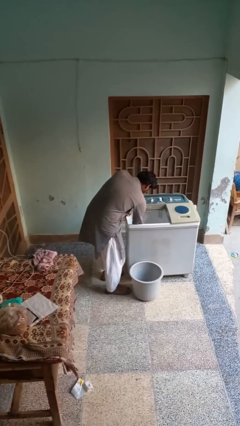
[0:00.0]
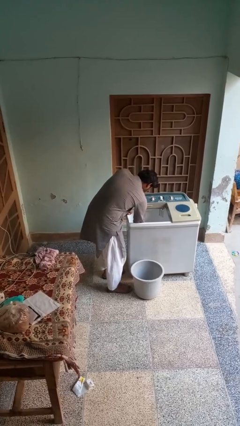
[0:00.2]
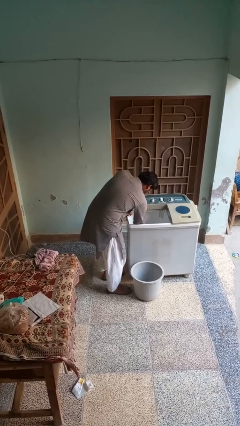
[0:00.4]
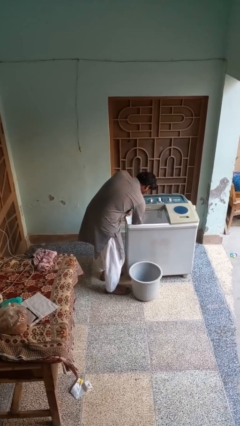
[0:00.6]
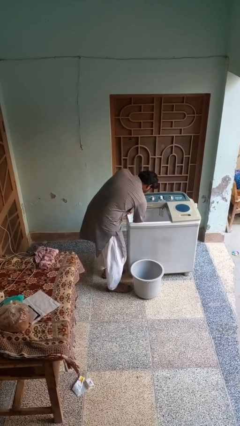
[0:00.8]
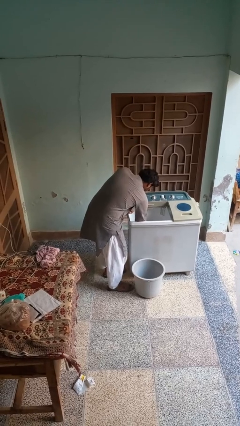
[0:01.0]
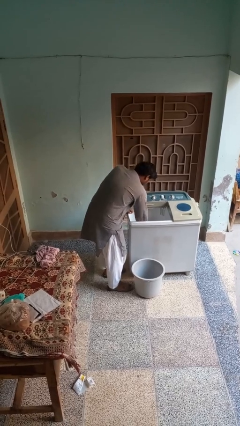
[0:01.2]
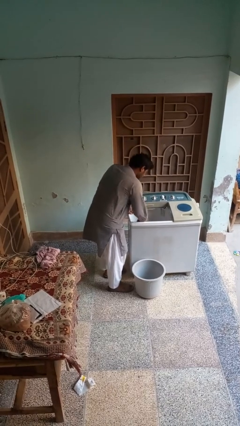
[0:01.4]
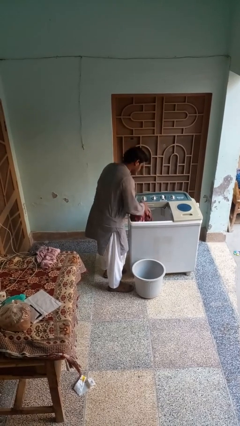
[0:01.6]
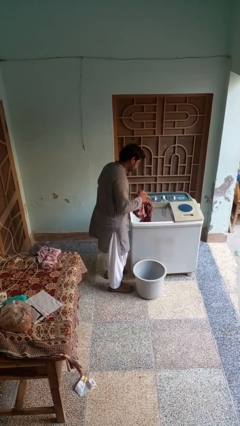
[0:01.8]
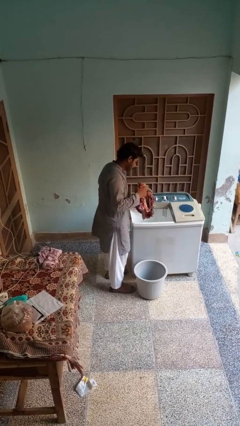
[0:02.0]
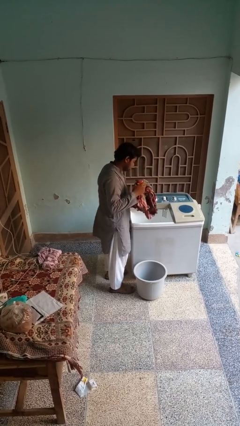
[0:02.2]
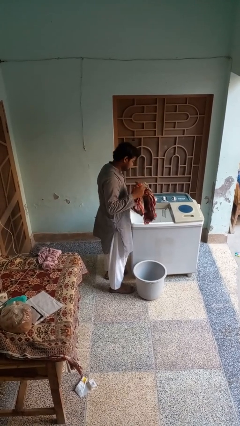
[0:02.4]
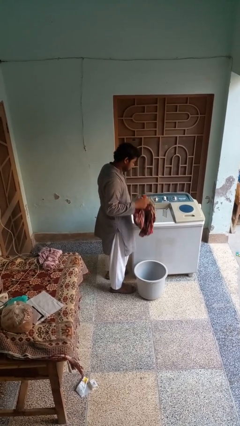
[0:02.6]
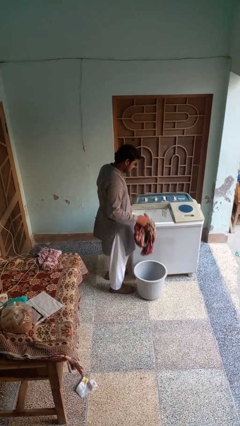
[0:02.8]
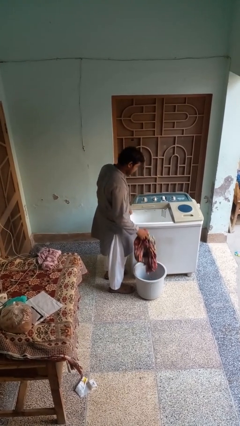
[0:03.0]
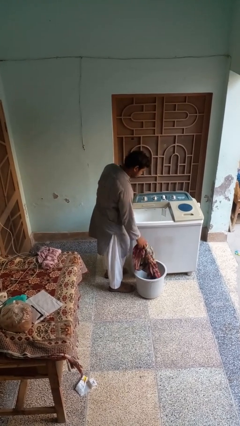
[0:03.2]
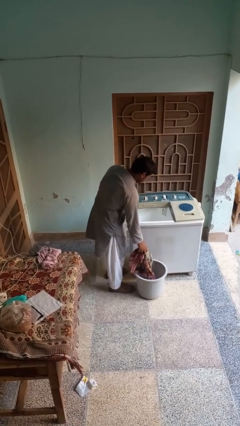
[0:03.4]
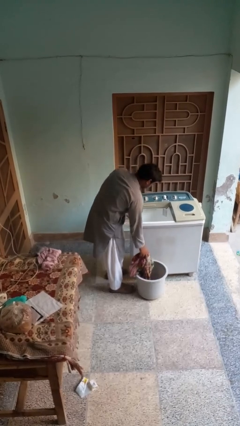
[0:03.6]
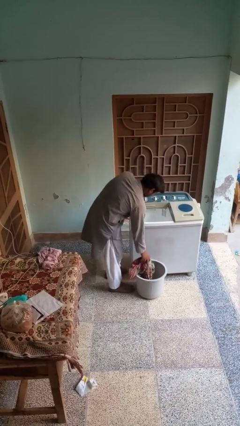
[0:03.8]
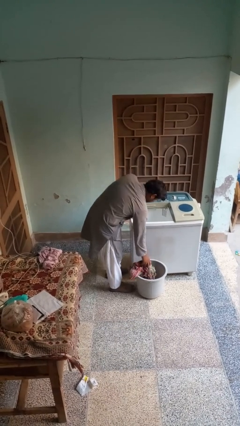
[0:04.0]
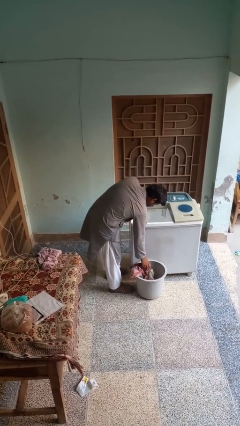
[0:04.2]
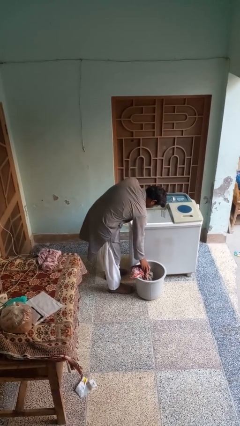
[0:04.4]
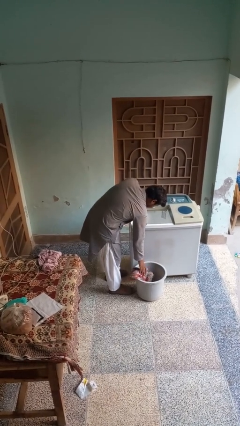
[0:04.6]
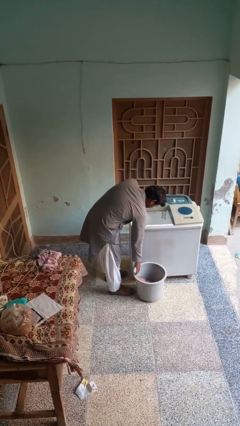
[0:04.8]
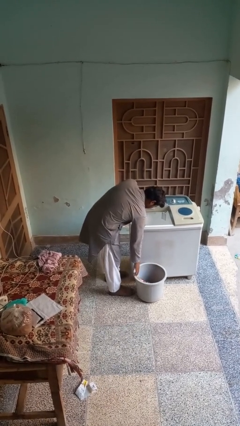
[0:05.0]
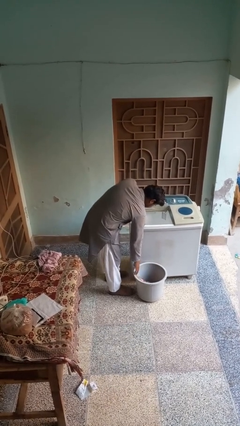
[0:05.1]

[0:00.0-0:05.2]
person unloads clotheswasher

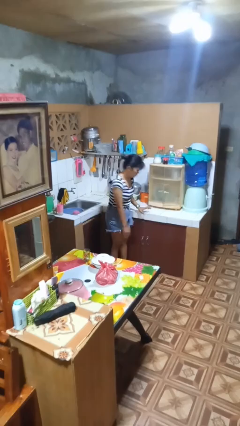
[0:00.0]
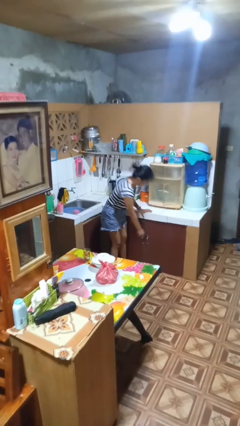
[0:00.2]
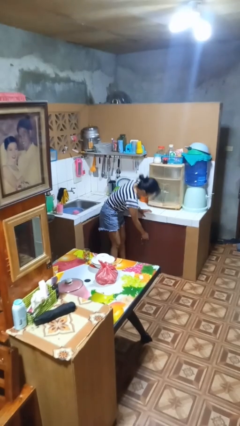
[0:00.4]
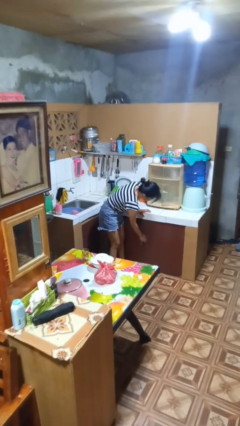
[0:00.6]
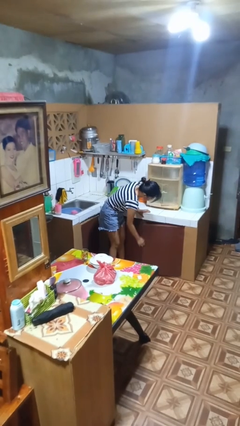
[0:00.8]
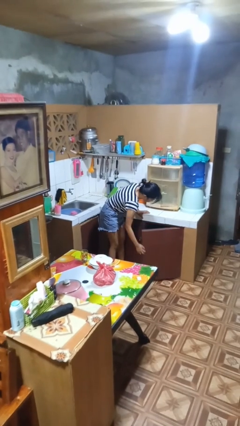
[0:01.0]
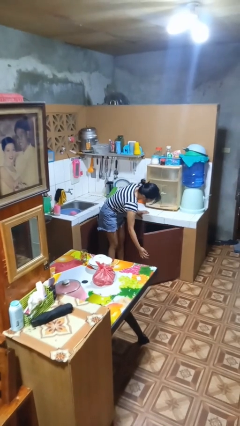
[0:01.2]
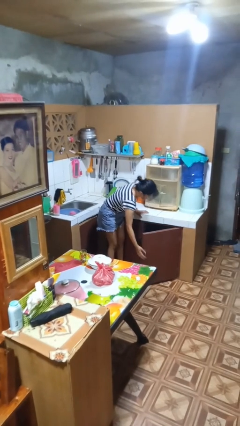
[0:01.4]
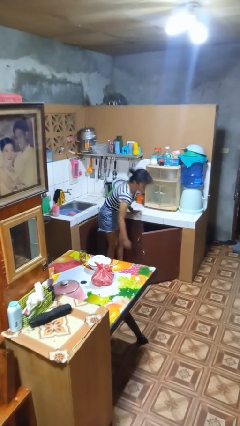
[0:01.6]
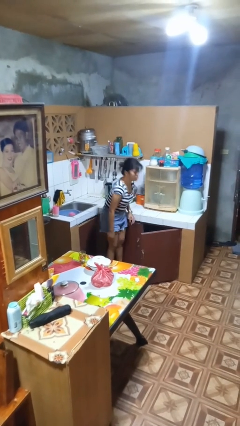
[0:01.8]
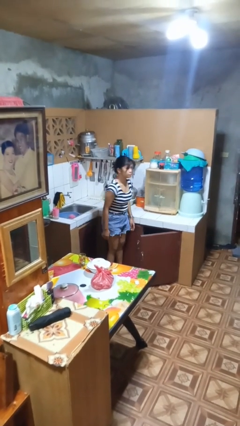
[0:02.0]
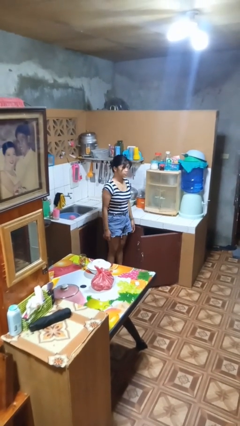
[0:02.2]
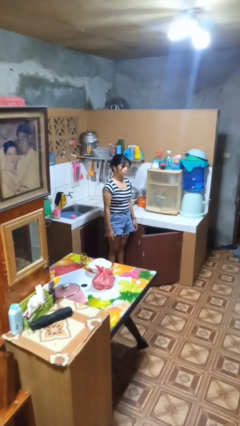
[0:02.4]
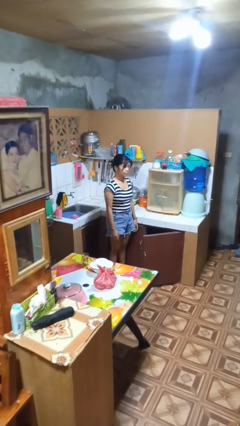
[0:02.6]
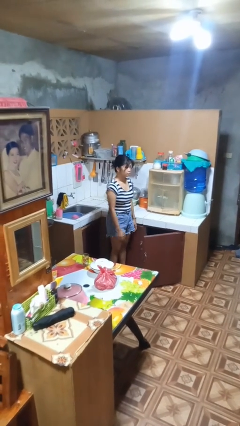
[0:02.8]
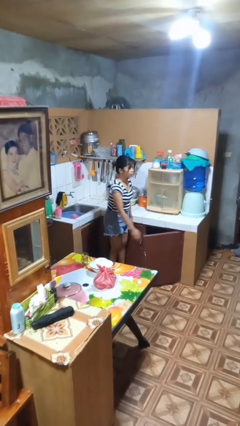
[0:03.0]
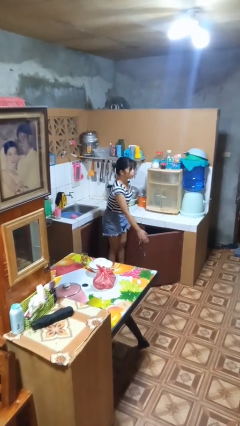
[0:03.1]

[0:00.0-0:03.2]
person opens cabinet

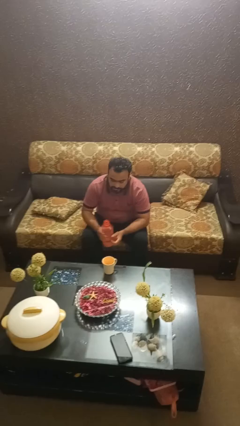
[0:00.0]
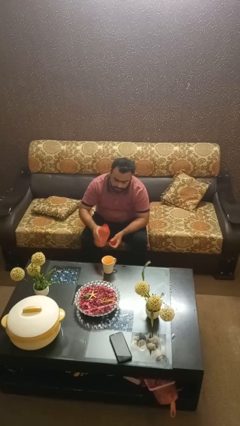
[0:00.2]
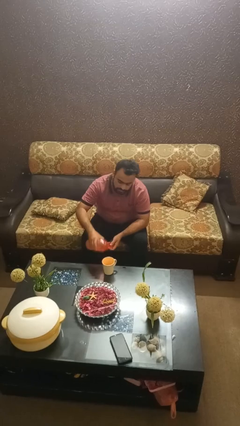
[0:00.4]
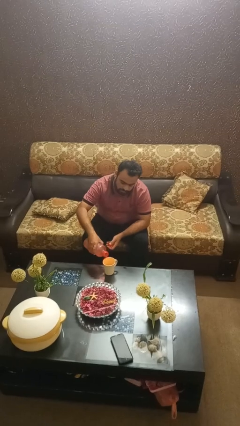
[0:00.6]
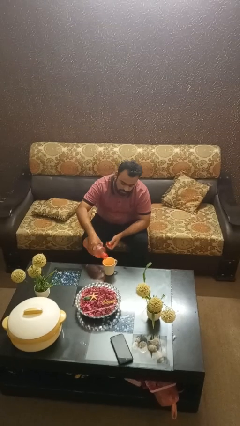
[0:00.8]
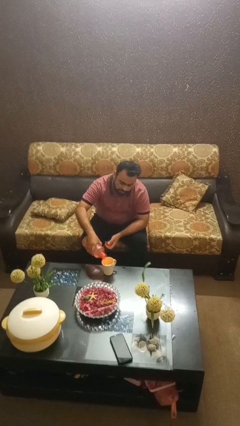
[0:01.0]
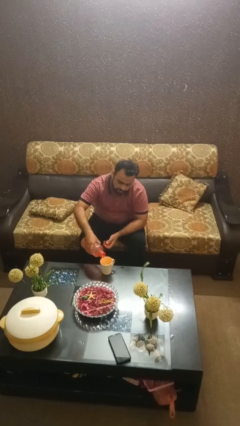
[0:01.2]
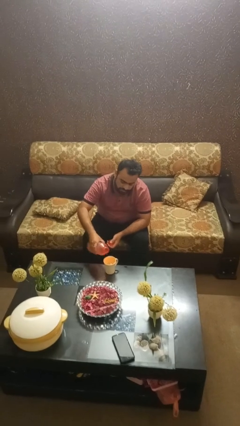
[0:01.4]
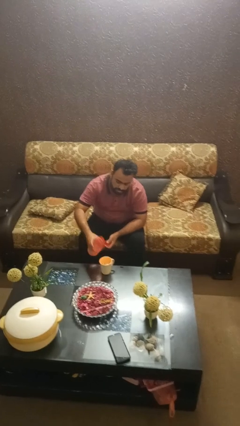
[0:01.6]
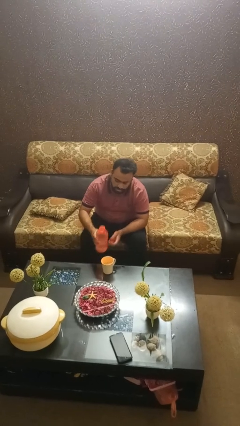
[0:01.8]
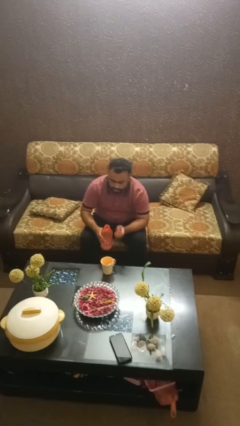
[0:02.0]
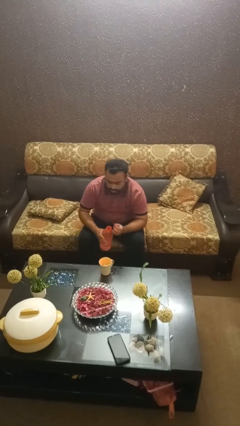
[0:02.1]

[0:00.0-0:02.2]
person pours liquid into cup

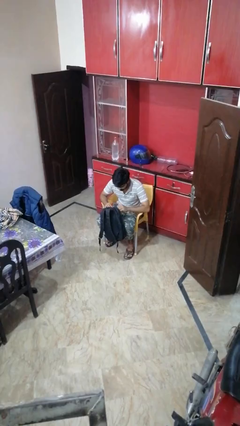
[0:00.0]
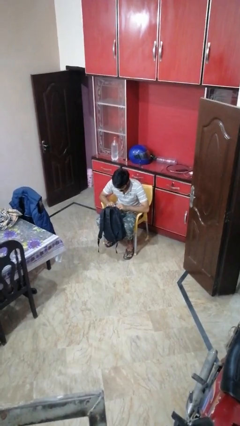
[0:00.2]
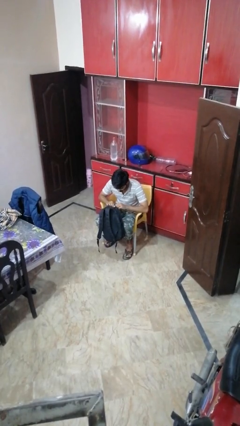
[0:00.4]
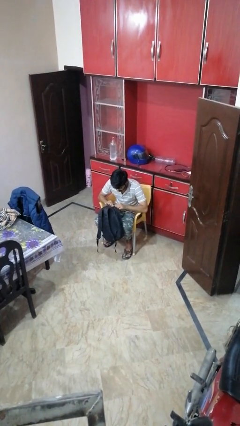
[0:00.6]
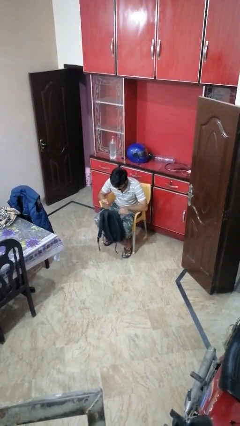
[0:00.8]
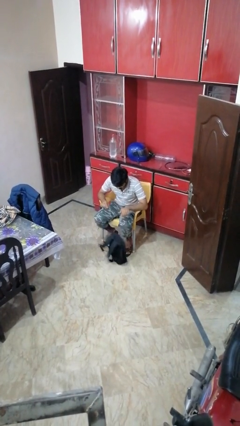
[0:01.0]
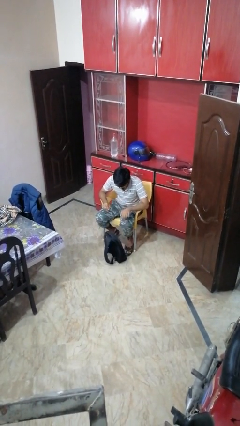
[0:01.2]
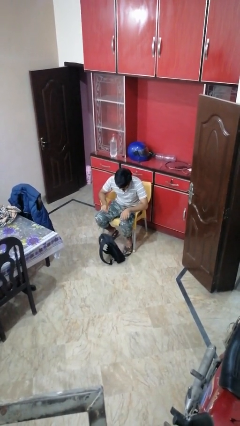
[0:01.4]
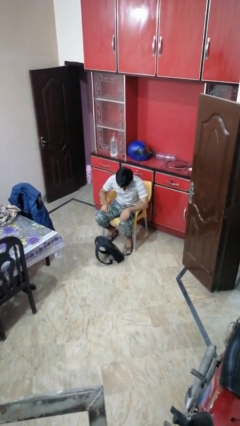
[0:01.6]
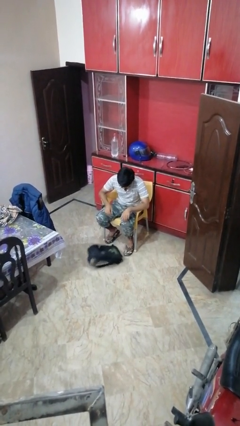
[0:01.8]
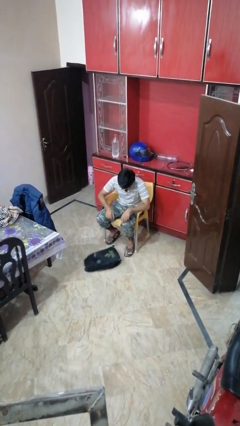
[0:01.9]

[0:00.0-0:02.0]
person drops object

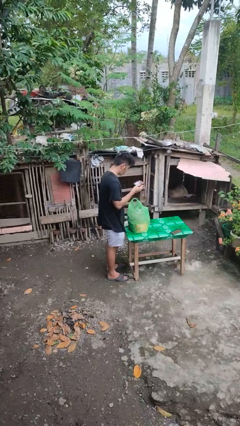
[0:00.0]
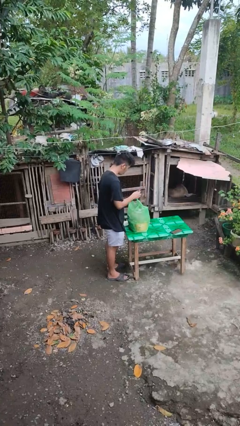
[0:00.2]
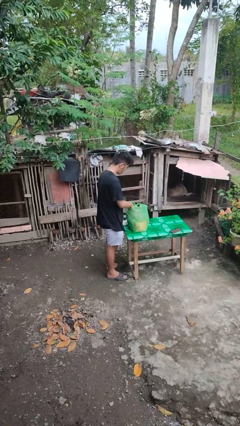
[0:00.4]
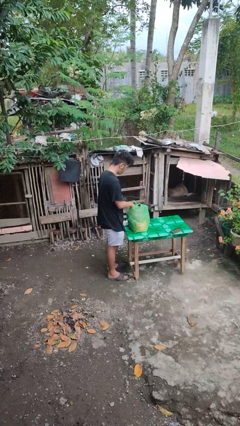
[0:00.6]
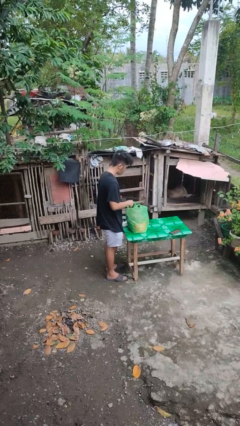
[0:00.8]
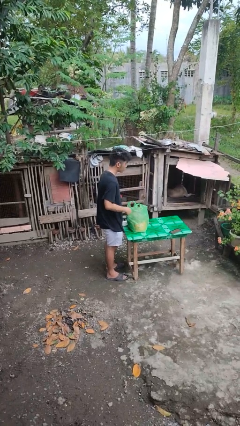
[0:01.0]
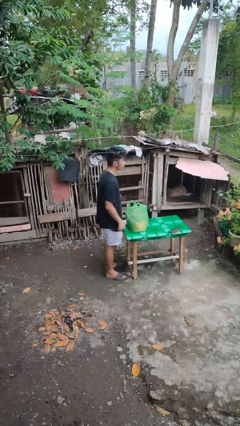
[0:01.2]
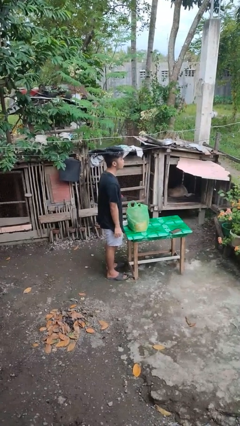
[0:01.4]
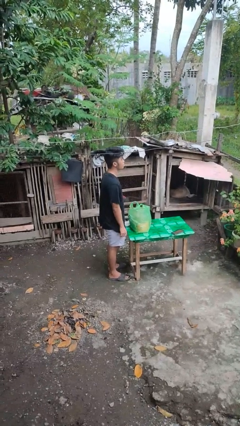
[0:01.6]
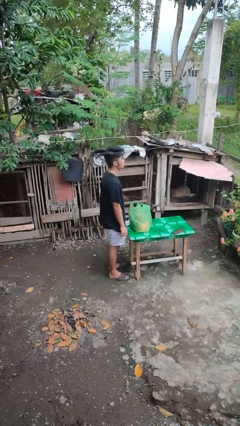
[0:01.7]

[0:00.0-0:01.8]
person puts object into bag

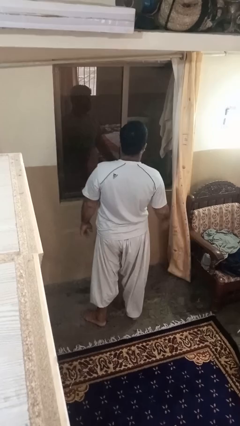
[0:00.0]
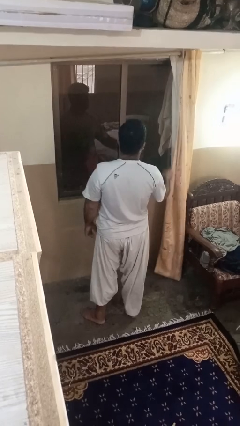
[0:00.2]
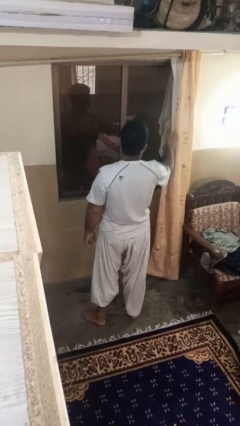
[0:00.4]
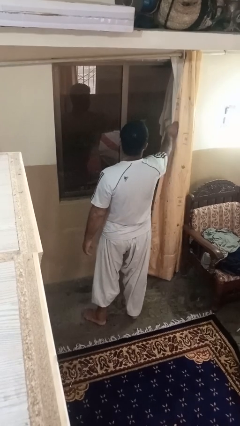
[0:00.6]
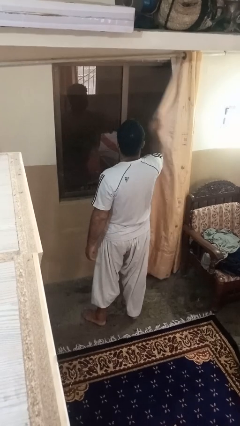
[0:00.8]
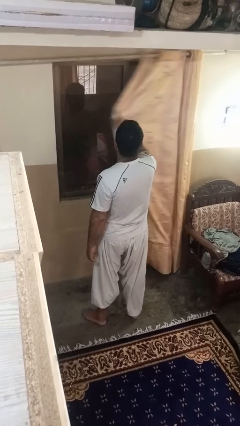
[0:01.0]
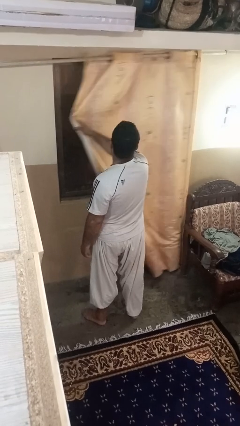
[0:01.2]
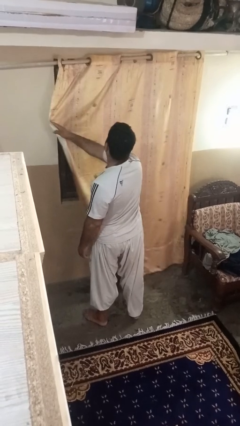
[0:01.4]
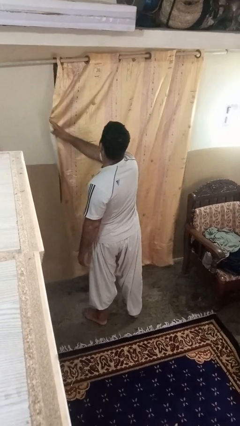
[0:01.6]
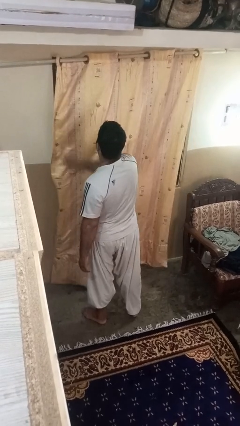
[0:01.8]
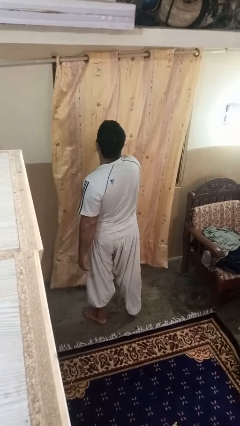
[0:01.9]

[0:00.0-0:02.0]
person closes curtains

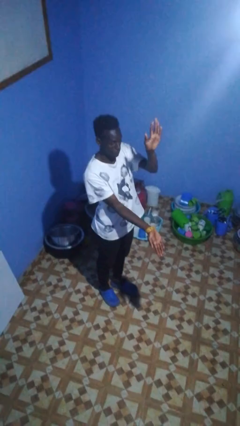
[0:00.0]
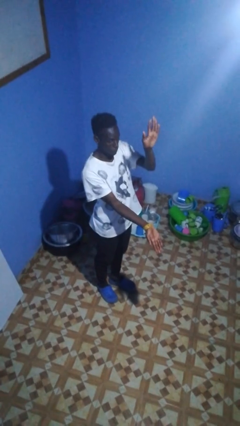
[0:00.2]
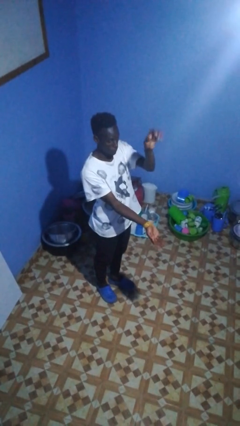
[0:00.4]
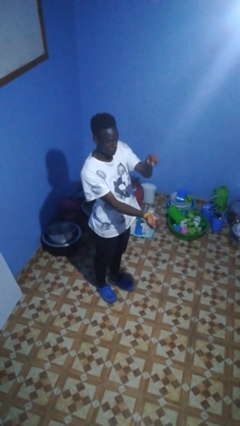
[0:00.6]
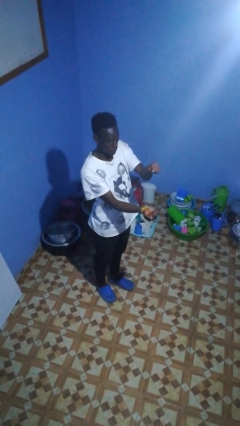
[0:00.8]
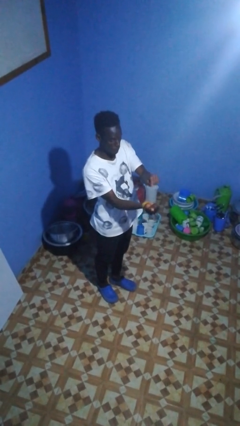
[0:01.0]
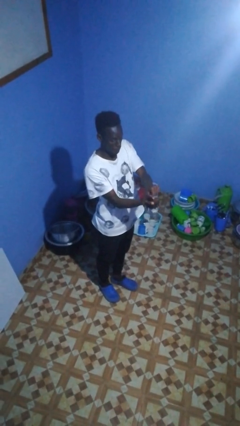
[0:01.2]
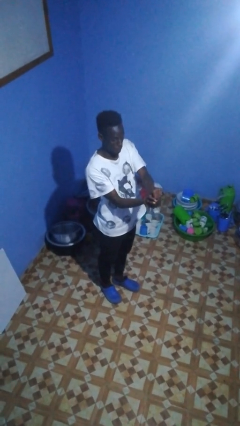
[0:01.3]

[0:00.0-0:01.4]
person gestures zoom out
